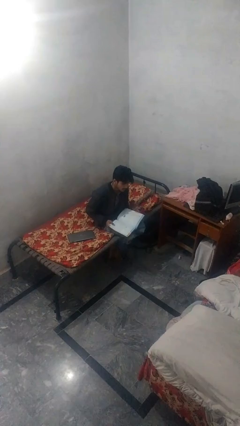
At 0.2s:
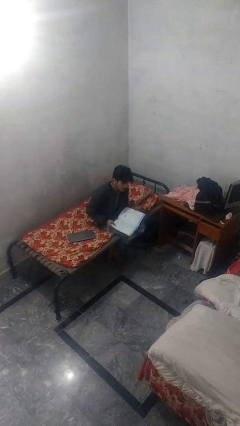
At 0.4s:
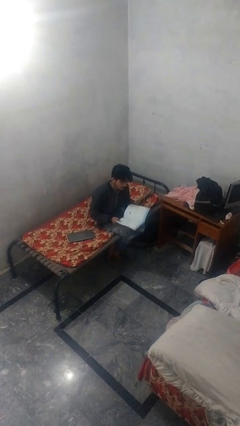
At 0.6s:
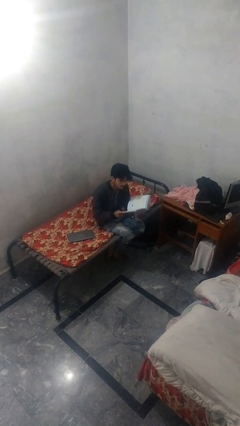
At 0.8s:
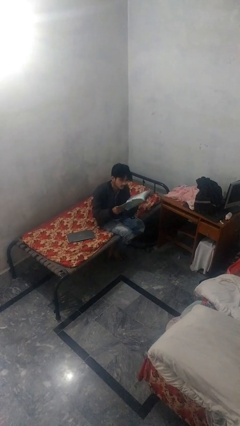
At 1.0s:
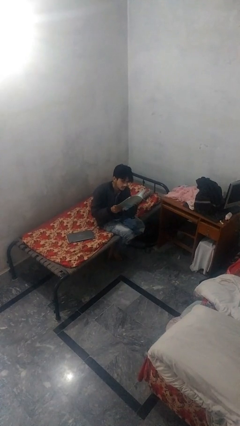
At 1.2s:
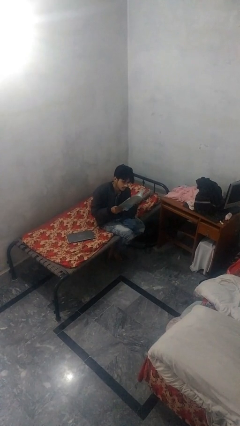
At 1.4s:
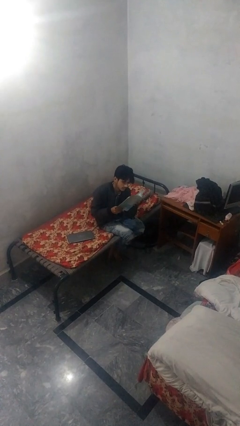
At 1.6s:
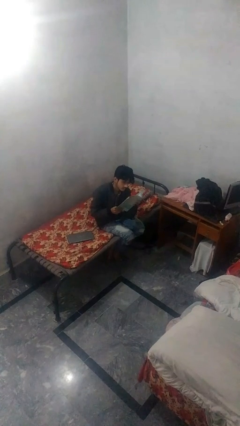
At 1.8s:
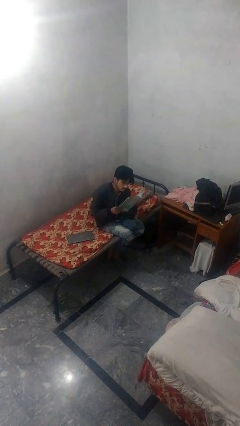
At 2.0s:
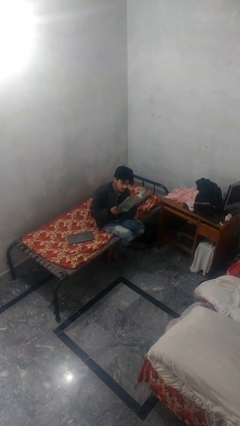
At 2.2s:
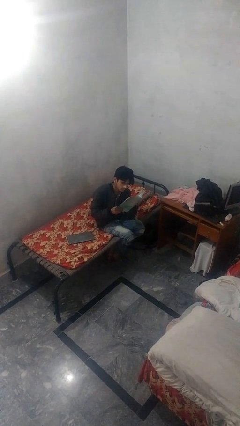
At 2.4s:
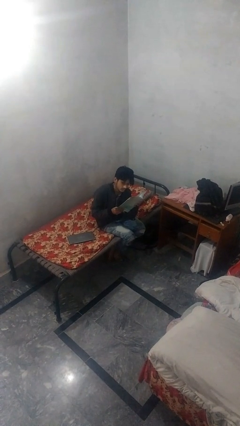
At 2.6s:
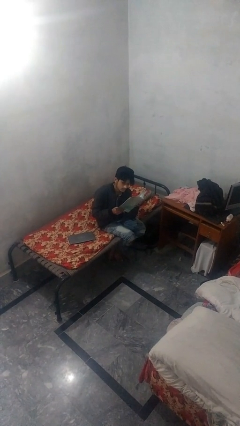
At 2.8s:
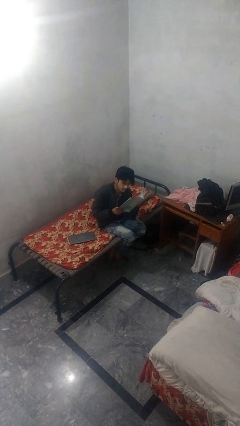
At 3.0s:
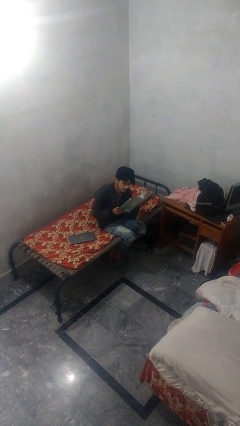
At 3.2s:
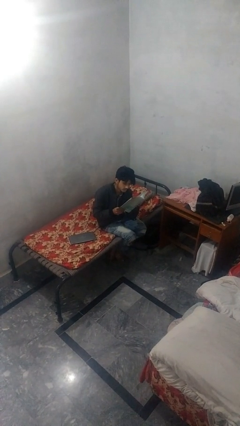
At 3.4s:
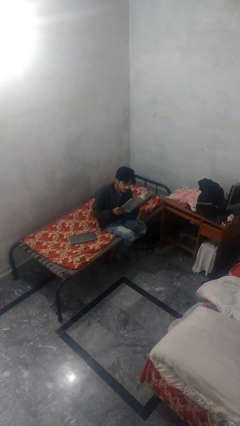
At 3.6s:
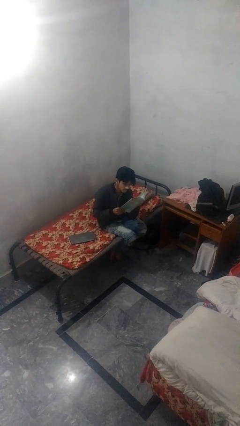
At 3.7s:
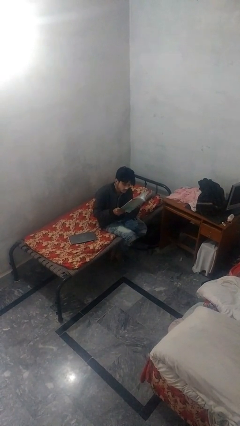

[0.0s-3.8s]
person reads document

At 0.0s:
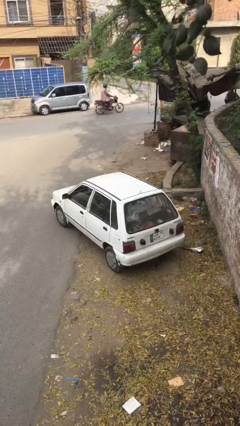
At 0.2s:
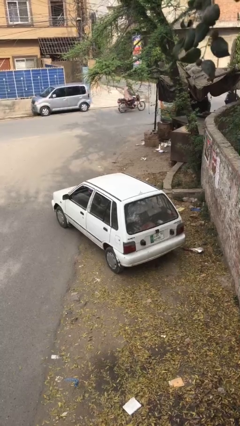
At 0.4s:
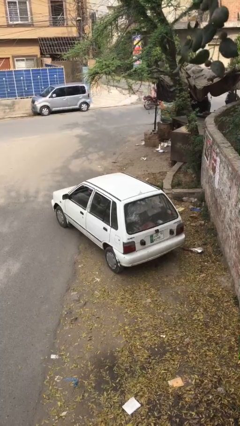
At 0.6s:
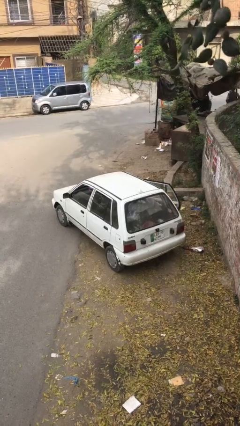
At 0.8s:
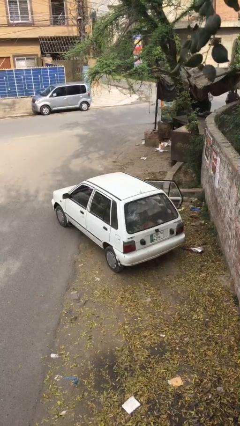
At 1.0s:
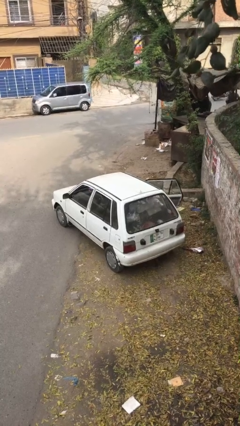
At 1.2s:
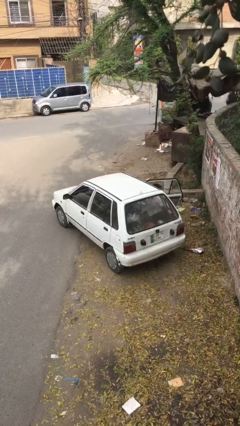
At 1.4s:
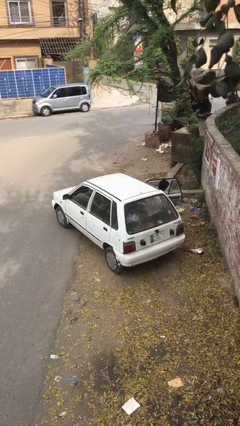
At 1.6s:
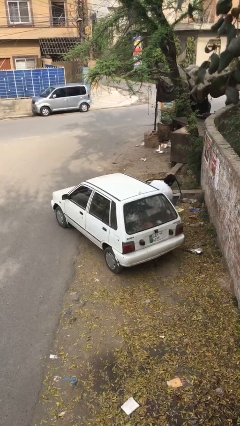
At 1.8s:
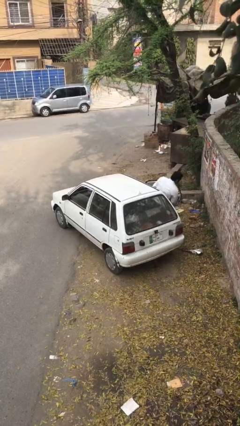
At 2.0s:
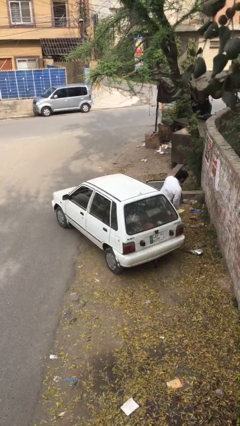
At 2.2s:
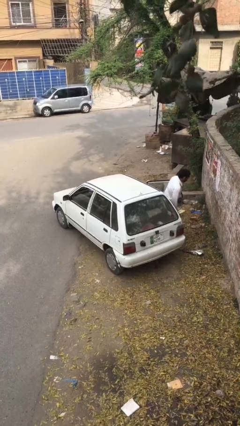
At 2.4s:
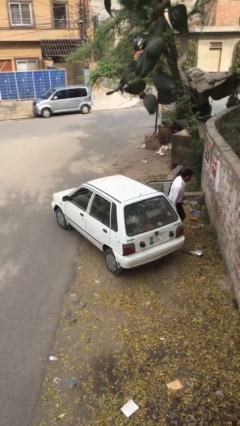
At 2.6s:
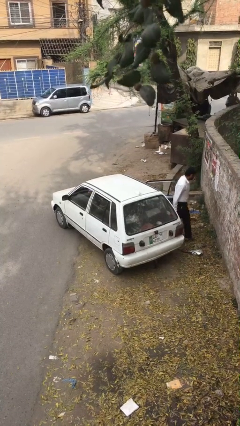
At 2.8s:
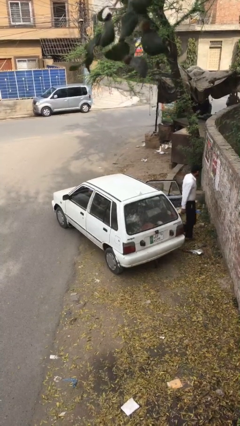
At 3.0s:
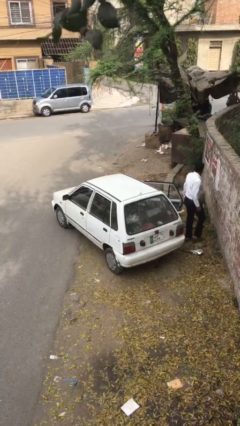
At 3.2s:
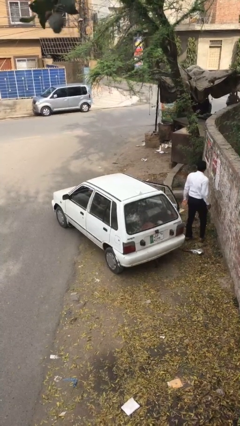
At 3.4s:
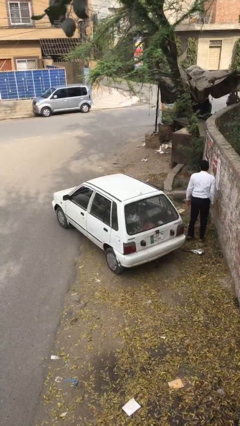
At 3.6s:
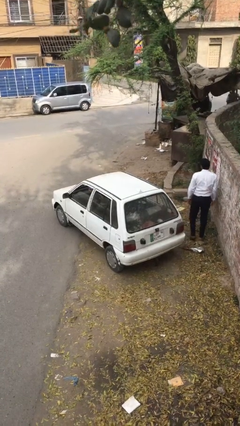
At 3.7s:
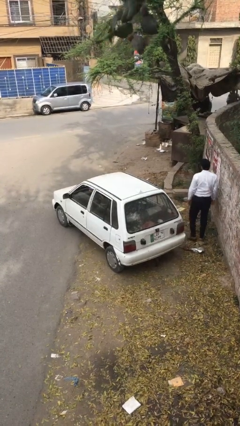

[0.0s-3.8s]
car drops off person

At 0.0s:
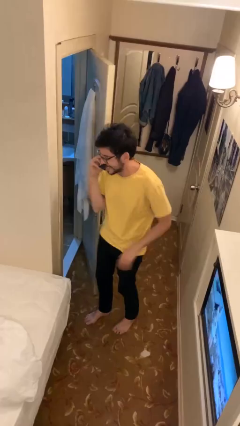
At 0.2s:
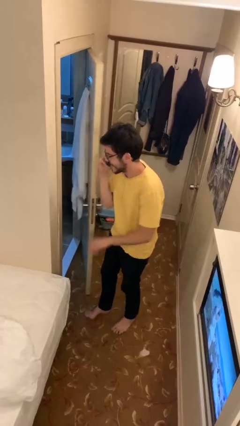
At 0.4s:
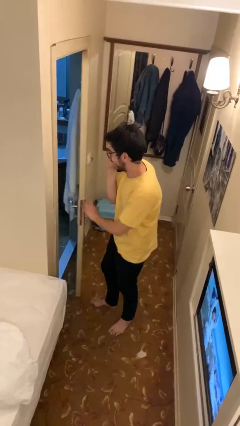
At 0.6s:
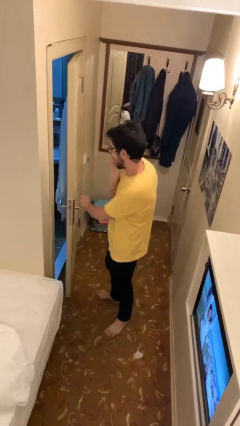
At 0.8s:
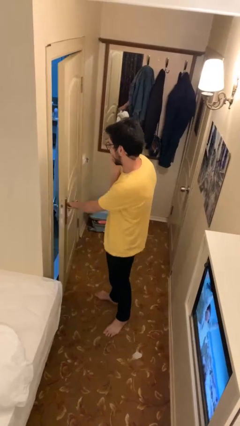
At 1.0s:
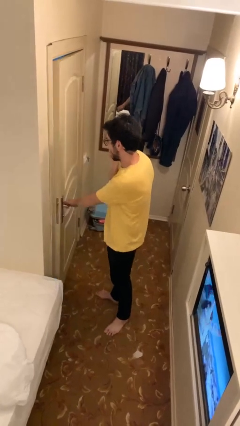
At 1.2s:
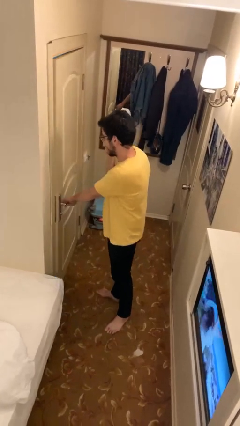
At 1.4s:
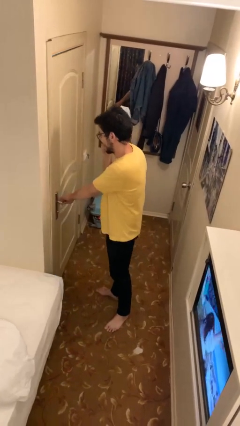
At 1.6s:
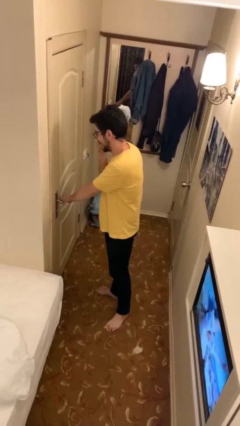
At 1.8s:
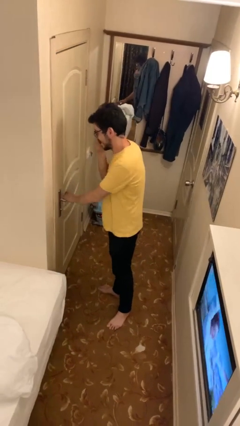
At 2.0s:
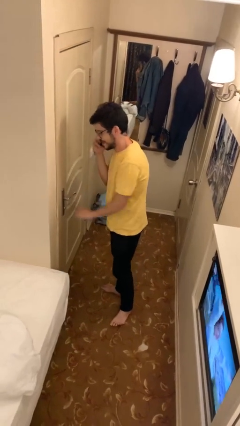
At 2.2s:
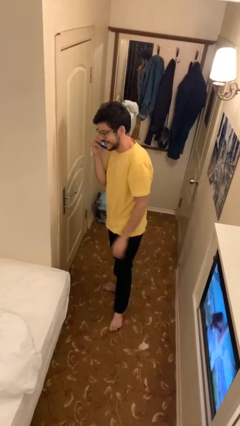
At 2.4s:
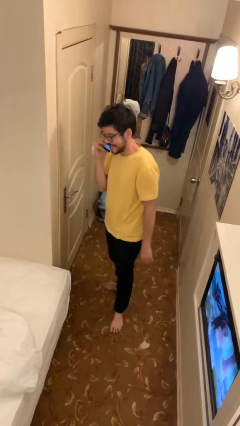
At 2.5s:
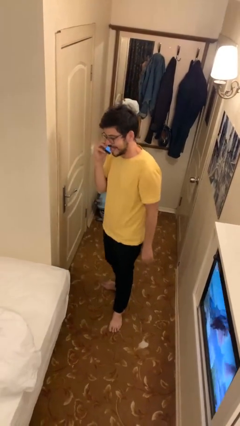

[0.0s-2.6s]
person closes facility door

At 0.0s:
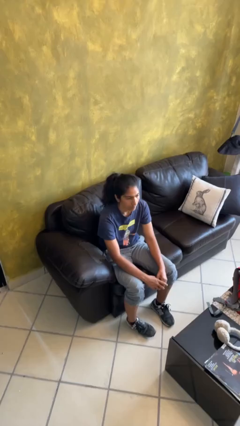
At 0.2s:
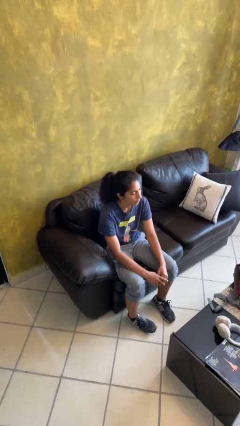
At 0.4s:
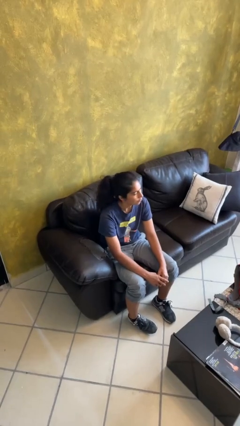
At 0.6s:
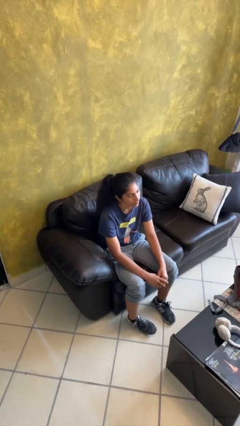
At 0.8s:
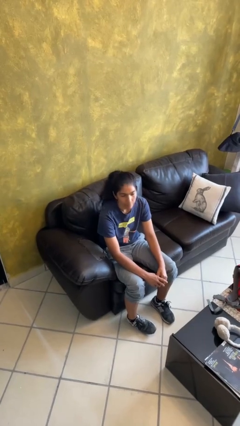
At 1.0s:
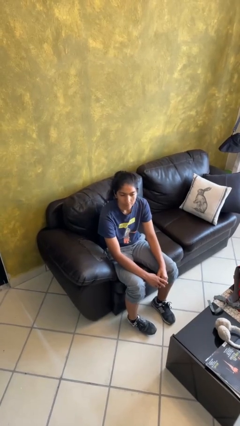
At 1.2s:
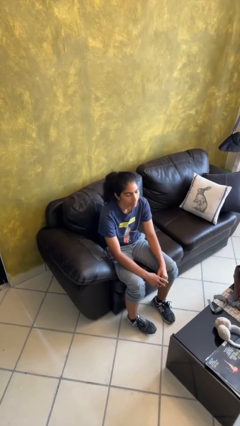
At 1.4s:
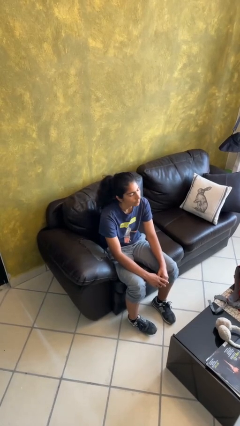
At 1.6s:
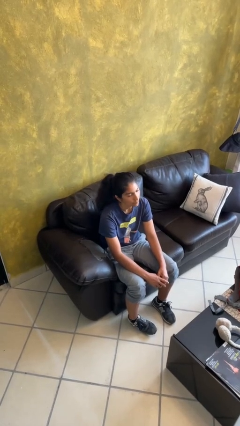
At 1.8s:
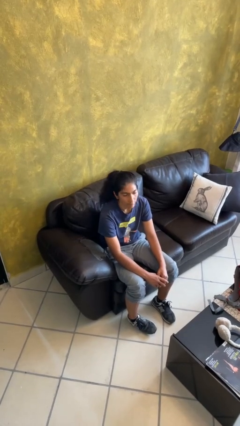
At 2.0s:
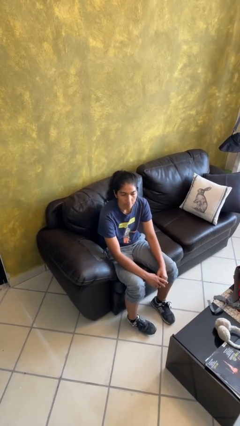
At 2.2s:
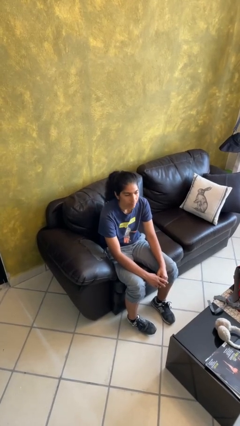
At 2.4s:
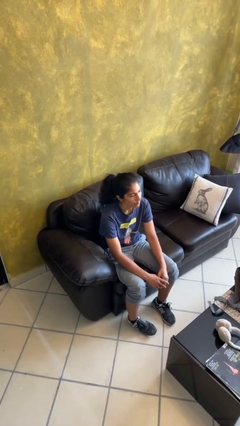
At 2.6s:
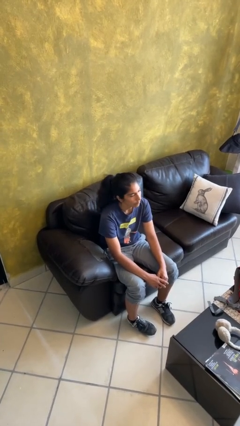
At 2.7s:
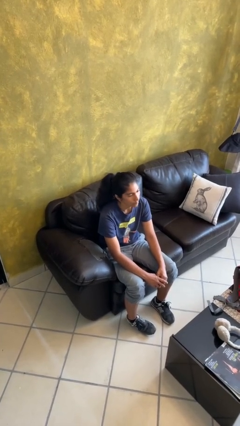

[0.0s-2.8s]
person shakes head

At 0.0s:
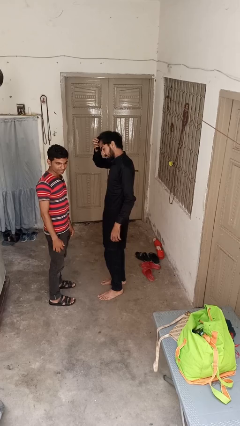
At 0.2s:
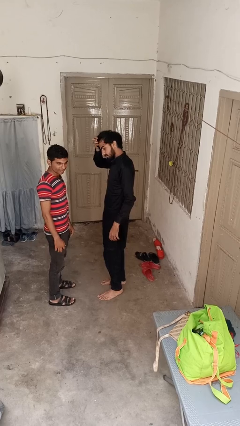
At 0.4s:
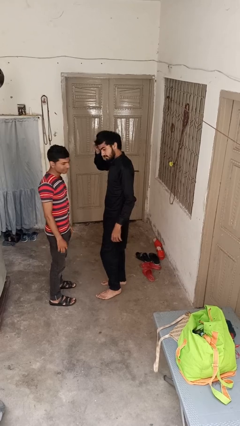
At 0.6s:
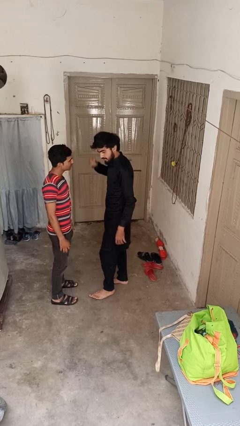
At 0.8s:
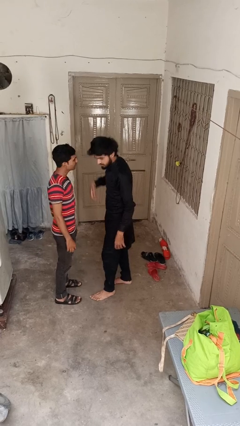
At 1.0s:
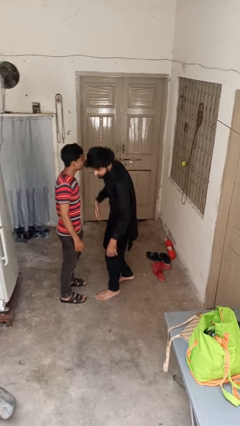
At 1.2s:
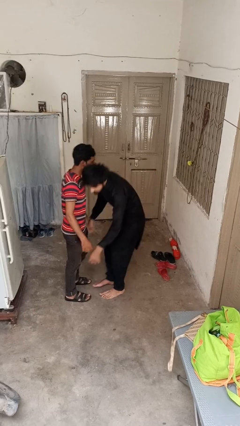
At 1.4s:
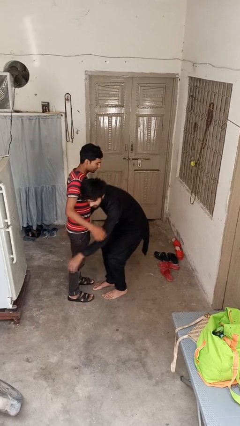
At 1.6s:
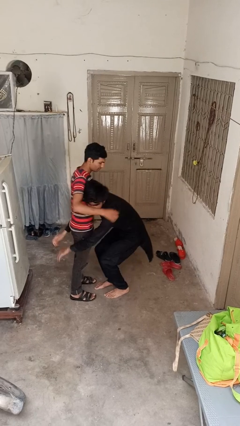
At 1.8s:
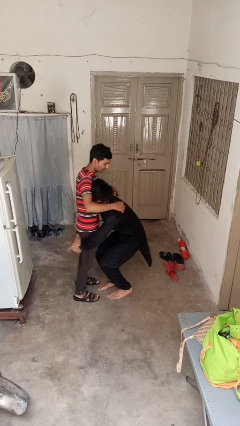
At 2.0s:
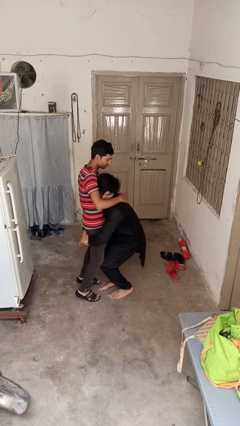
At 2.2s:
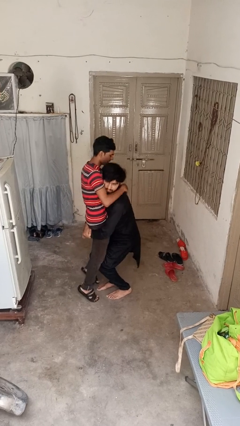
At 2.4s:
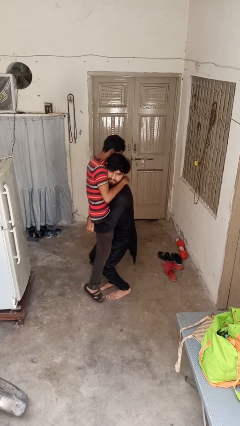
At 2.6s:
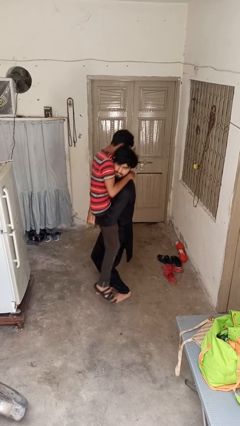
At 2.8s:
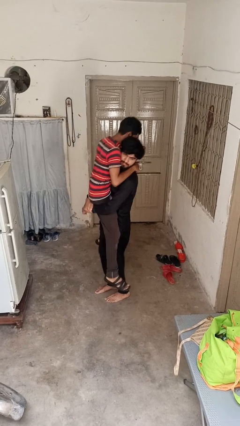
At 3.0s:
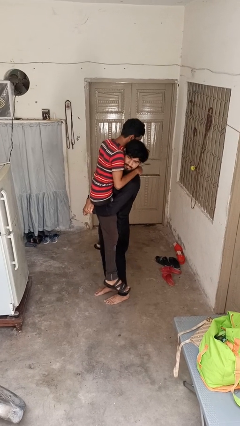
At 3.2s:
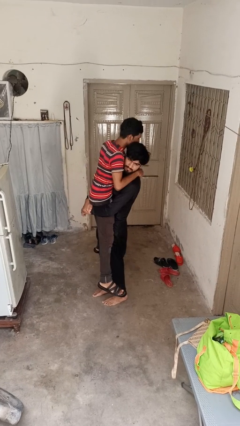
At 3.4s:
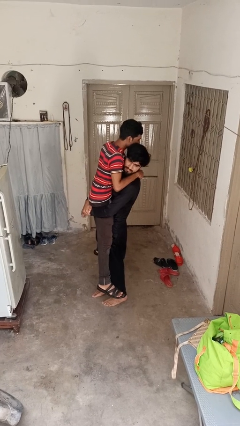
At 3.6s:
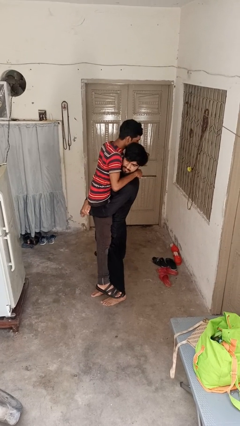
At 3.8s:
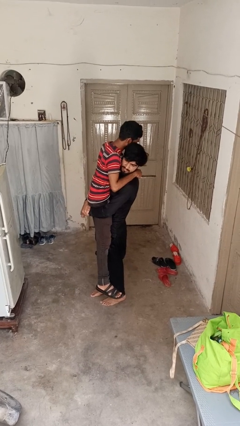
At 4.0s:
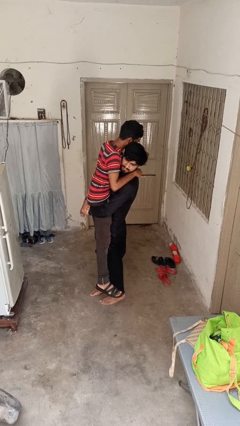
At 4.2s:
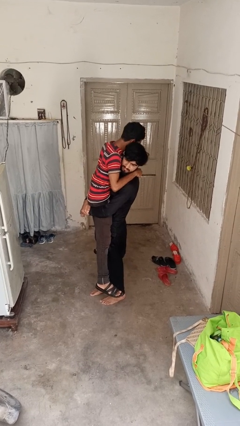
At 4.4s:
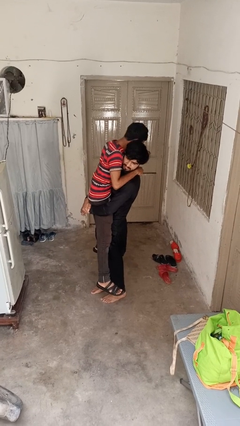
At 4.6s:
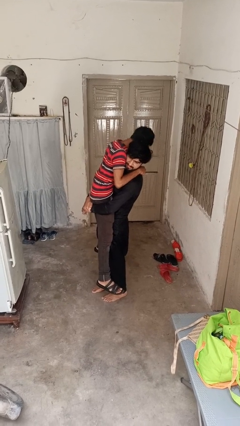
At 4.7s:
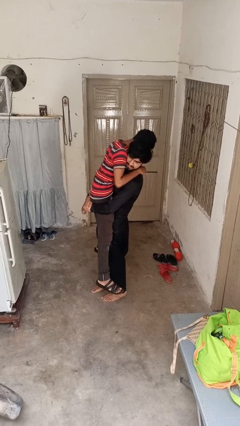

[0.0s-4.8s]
person picks up person
